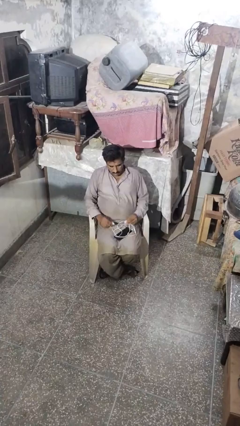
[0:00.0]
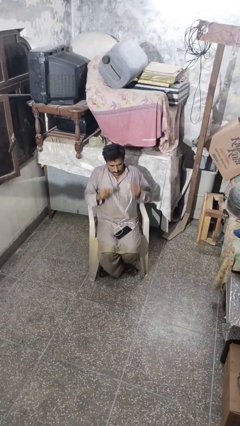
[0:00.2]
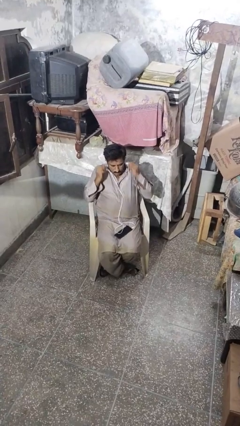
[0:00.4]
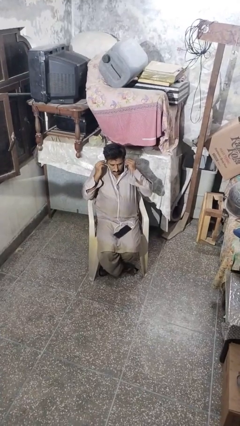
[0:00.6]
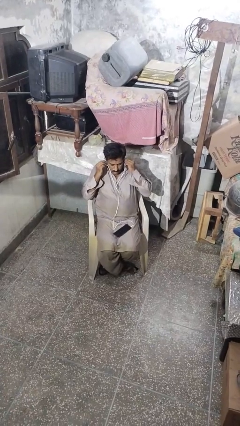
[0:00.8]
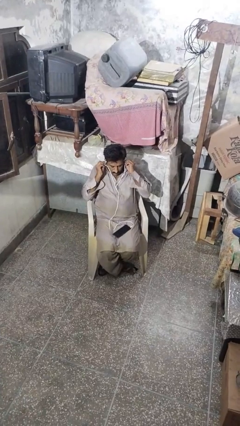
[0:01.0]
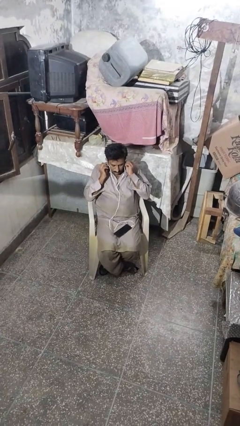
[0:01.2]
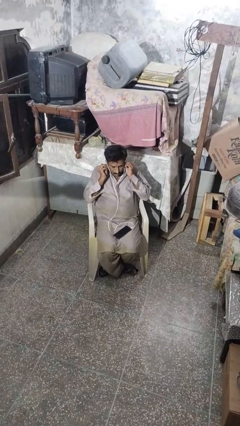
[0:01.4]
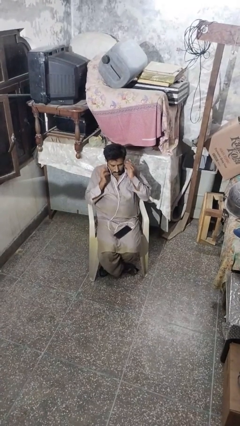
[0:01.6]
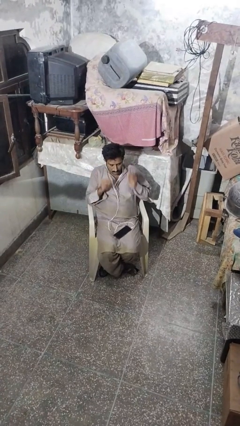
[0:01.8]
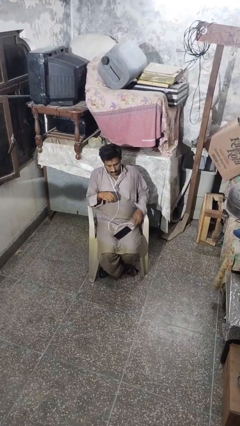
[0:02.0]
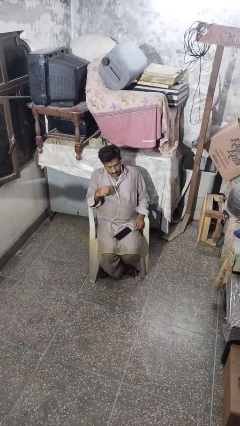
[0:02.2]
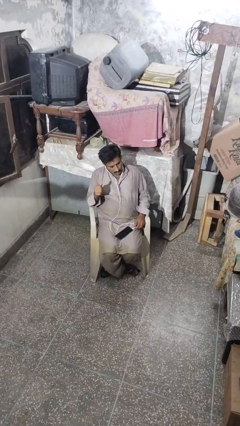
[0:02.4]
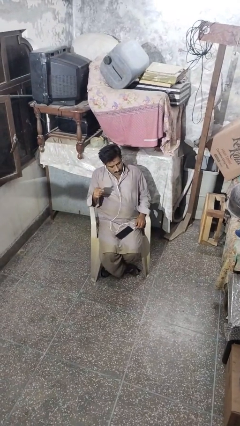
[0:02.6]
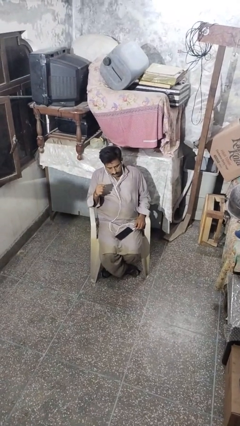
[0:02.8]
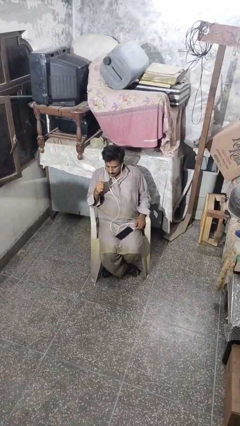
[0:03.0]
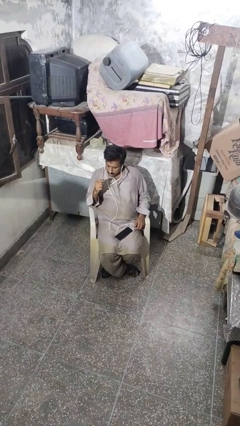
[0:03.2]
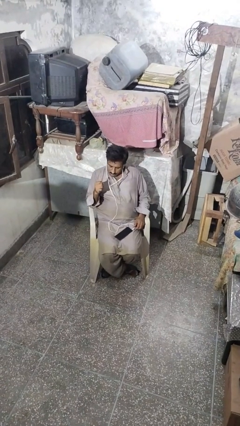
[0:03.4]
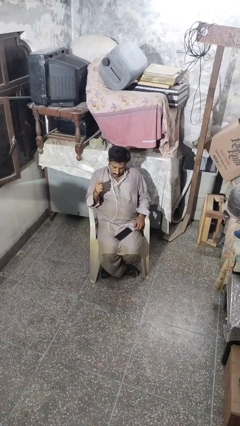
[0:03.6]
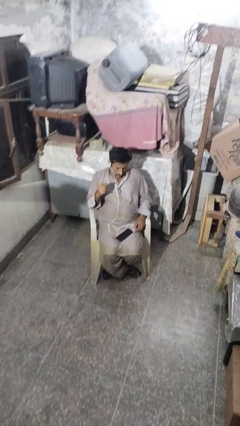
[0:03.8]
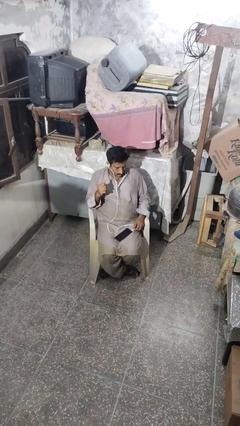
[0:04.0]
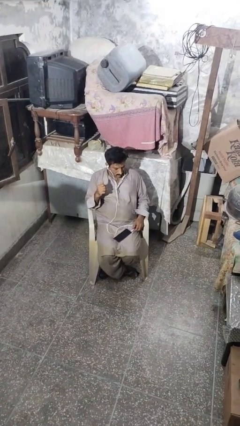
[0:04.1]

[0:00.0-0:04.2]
person puts on headphones

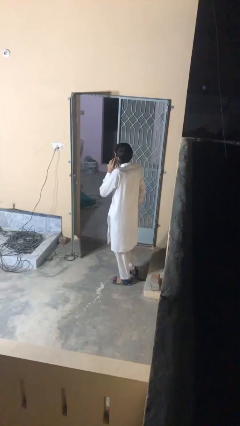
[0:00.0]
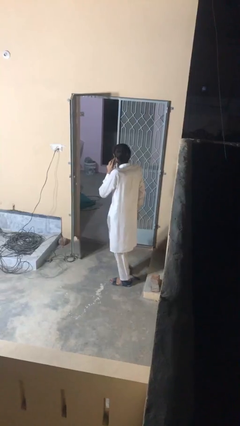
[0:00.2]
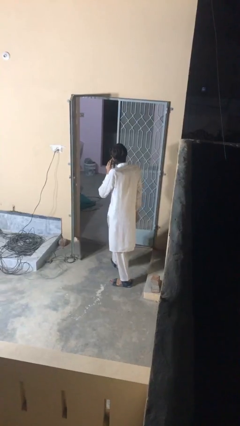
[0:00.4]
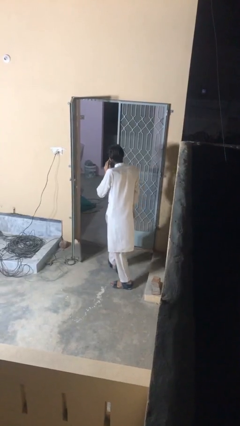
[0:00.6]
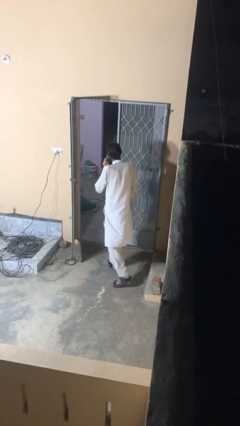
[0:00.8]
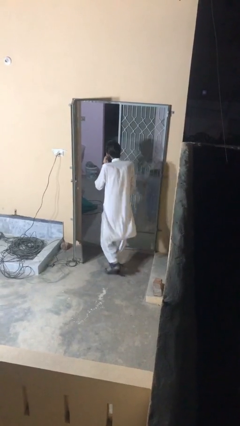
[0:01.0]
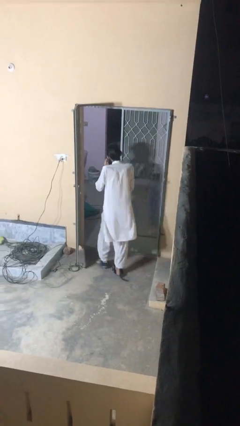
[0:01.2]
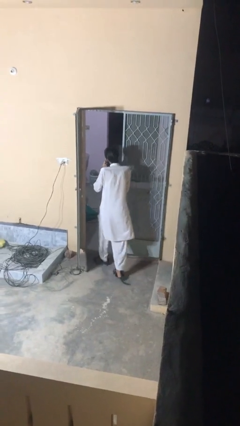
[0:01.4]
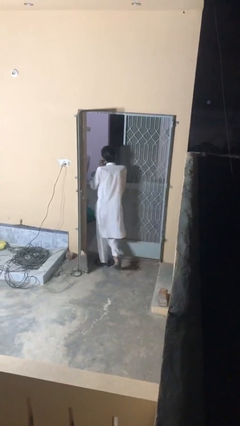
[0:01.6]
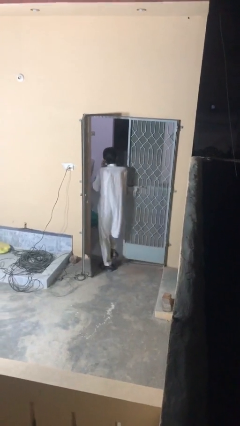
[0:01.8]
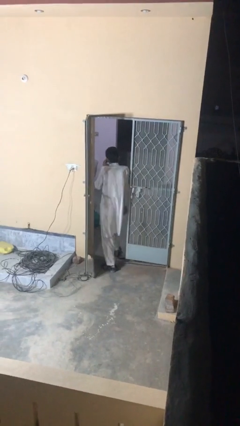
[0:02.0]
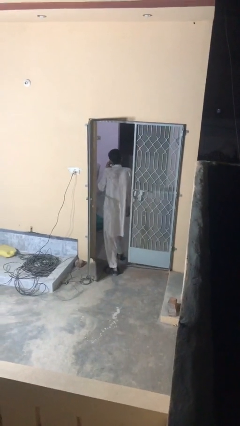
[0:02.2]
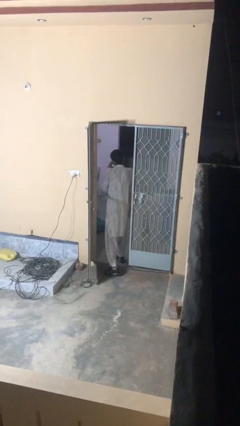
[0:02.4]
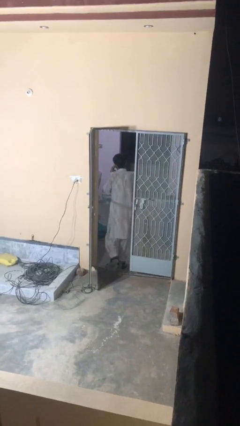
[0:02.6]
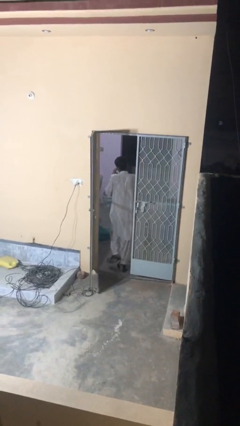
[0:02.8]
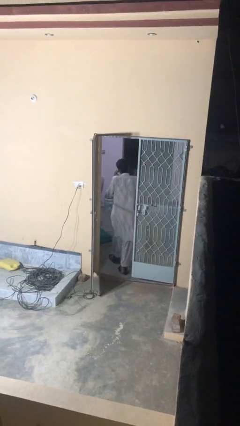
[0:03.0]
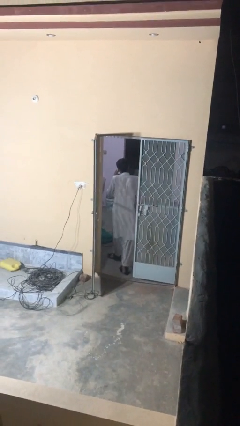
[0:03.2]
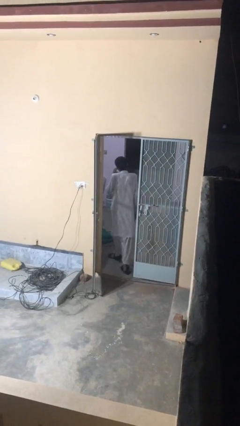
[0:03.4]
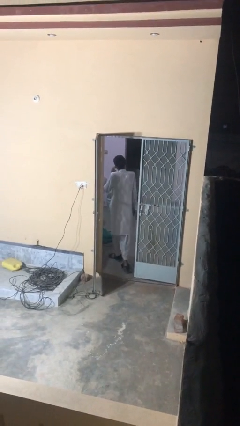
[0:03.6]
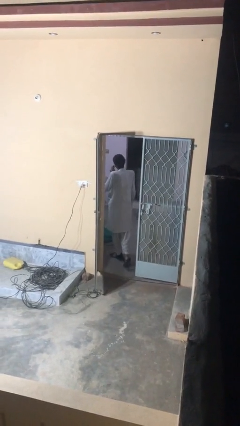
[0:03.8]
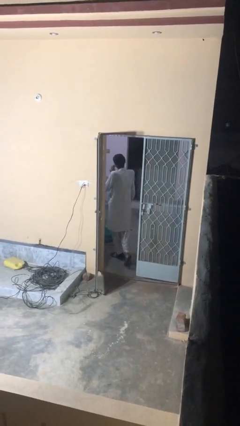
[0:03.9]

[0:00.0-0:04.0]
person exits scene through structure

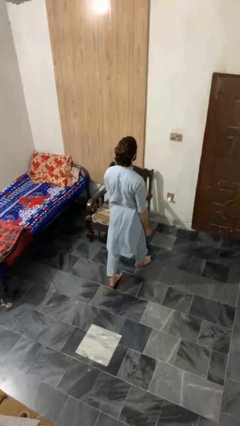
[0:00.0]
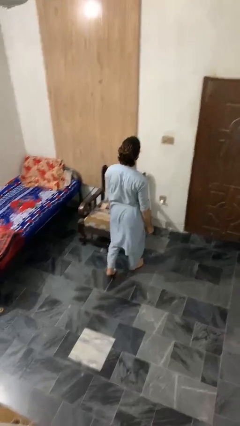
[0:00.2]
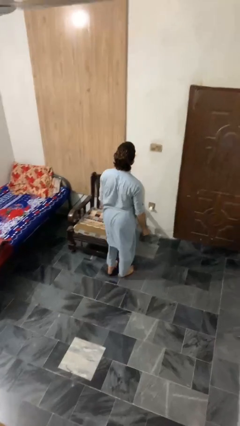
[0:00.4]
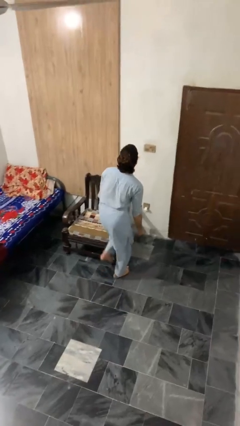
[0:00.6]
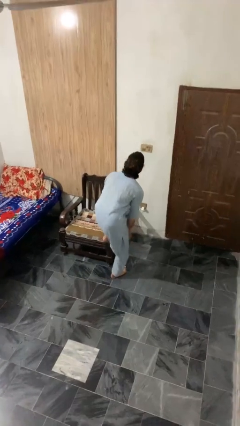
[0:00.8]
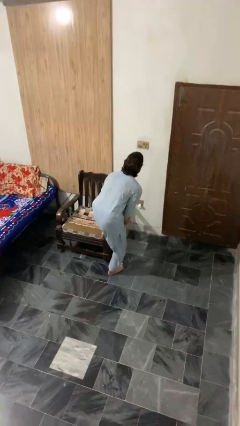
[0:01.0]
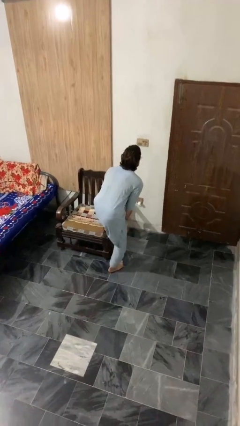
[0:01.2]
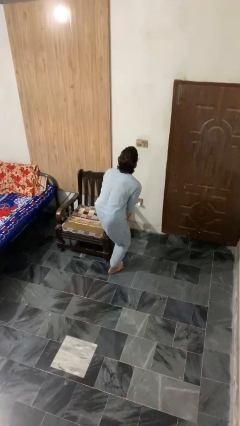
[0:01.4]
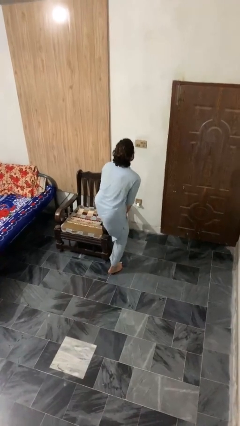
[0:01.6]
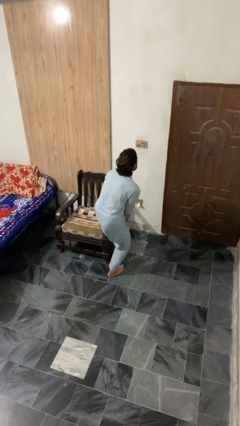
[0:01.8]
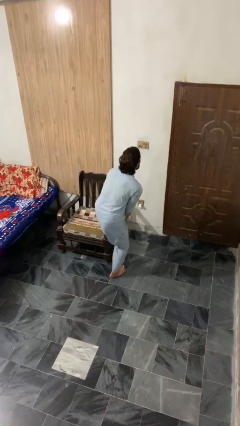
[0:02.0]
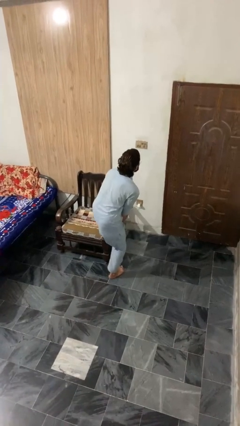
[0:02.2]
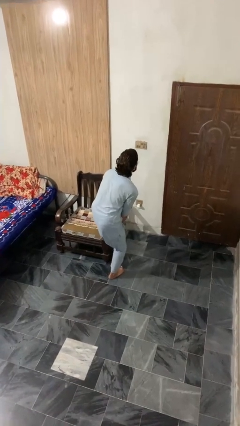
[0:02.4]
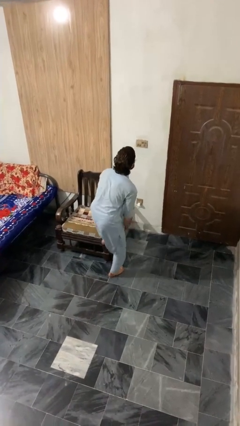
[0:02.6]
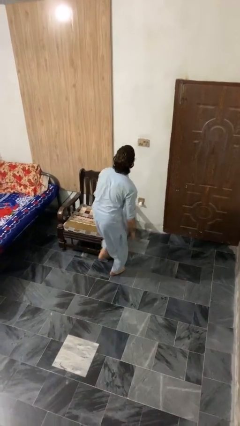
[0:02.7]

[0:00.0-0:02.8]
person stubs toe

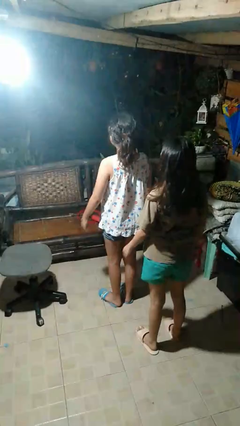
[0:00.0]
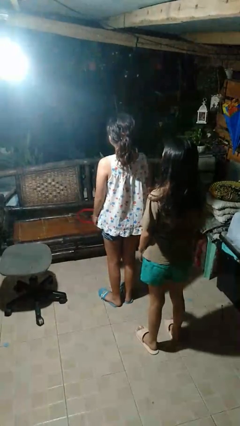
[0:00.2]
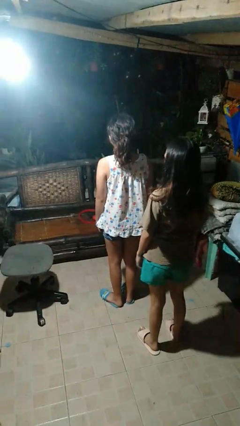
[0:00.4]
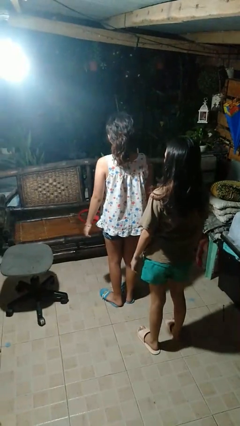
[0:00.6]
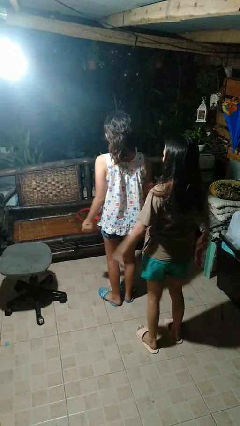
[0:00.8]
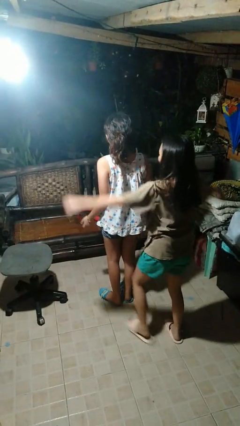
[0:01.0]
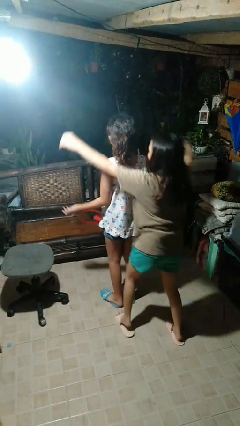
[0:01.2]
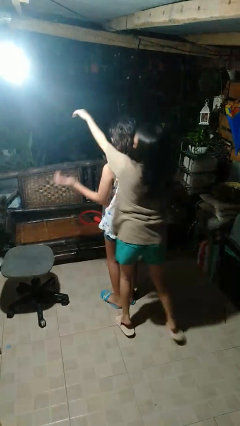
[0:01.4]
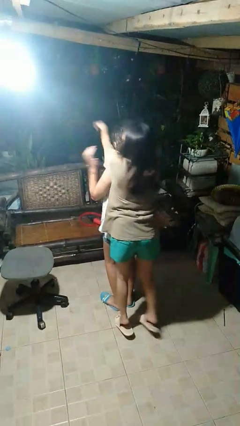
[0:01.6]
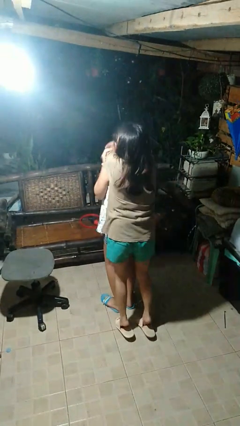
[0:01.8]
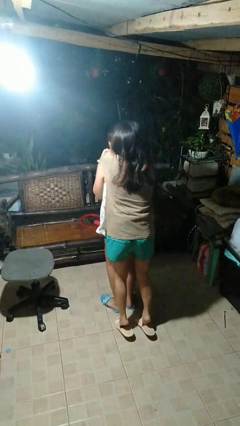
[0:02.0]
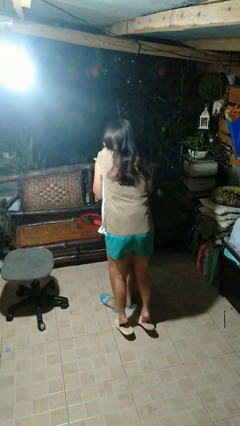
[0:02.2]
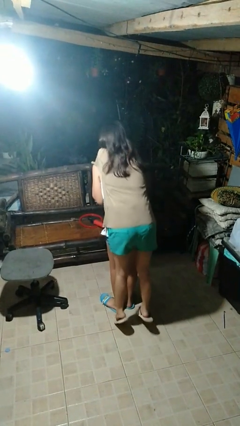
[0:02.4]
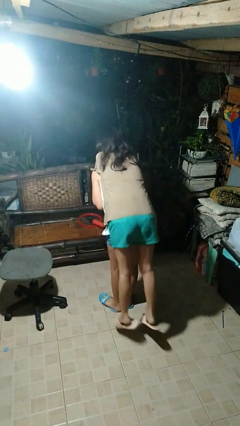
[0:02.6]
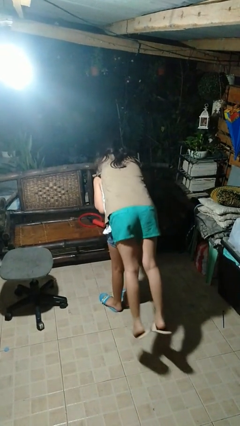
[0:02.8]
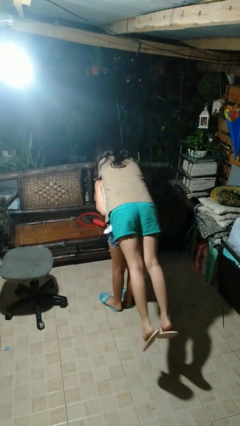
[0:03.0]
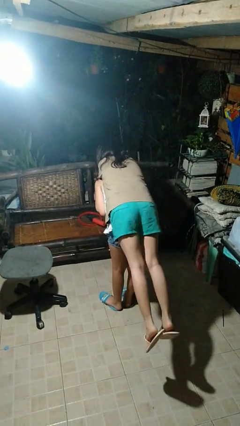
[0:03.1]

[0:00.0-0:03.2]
person carries person on back

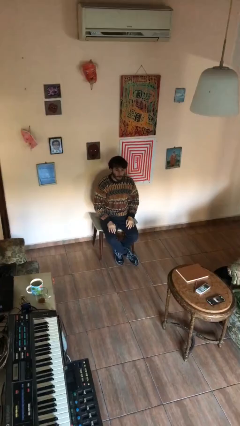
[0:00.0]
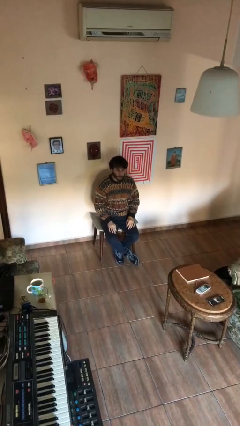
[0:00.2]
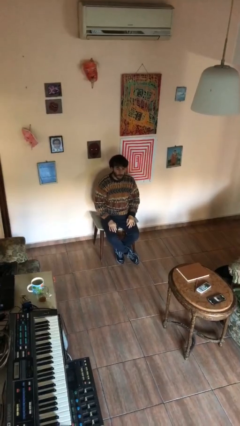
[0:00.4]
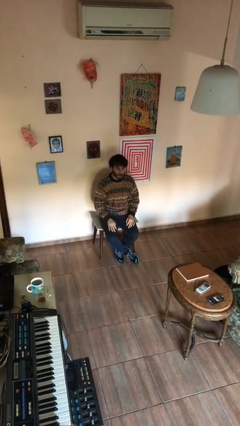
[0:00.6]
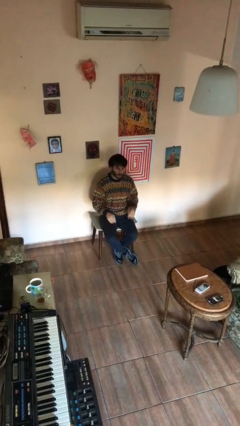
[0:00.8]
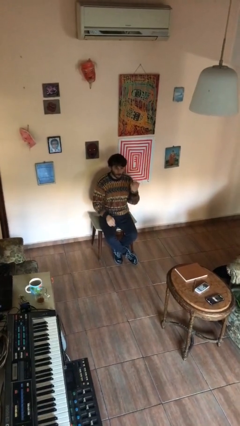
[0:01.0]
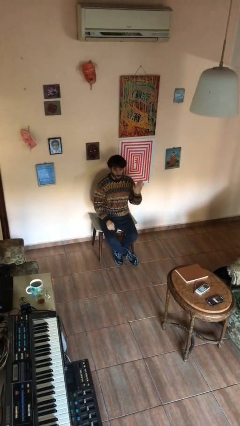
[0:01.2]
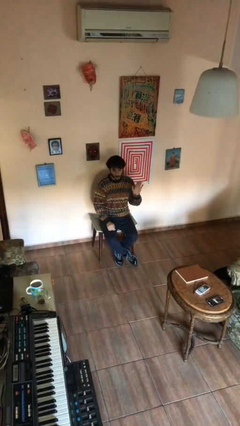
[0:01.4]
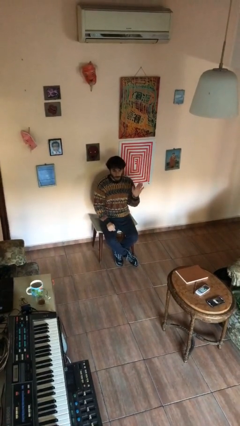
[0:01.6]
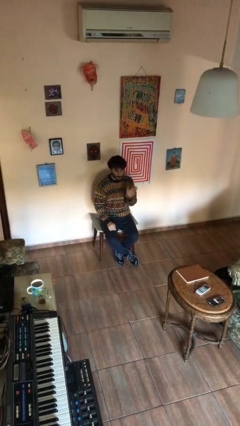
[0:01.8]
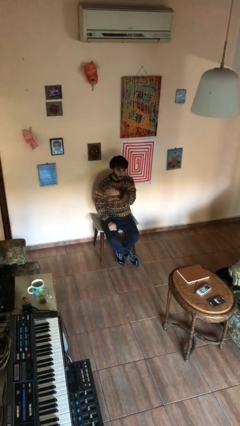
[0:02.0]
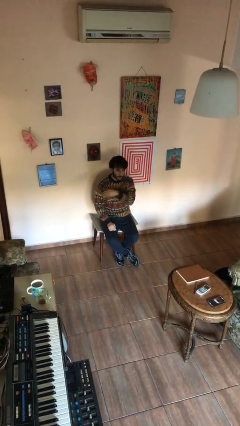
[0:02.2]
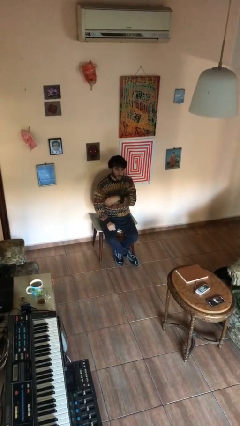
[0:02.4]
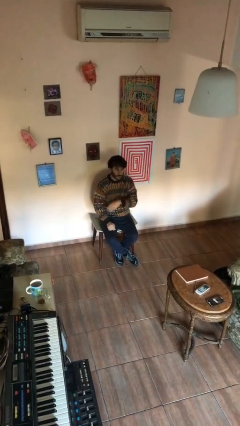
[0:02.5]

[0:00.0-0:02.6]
person gestures swipe right

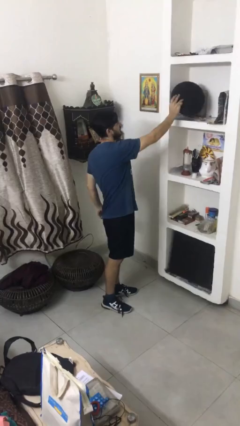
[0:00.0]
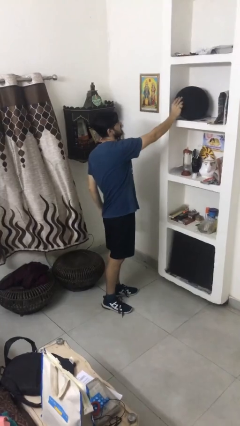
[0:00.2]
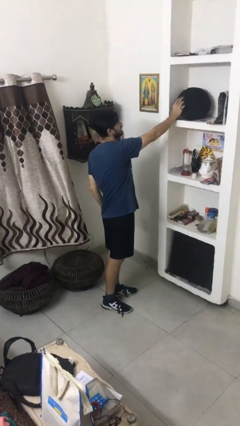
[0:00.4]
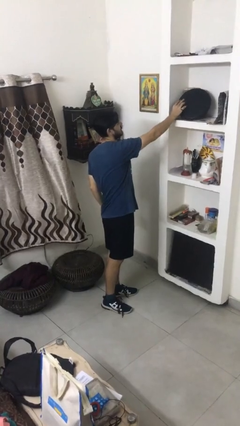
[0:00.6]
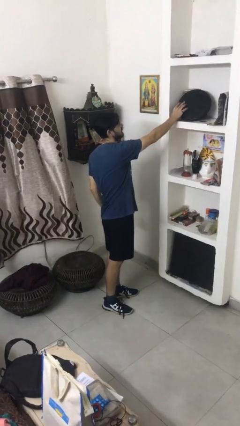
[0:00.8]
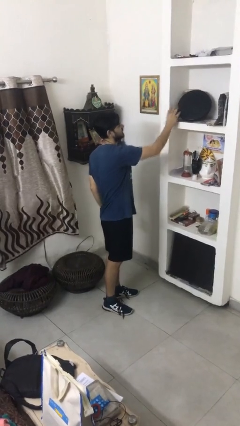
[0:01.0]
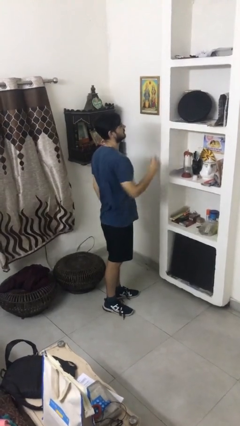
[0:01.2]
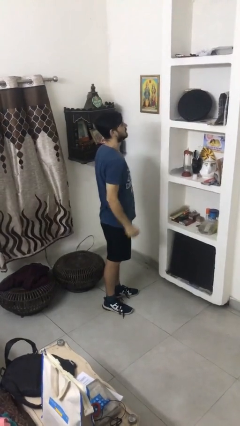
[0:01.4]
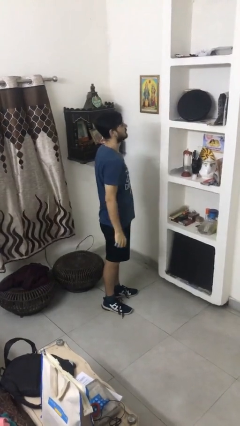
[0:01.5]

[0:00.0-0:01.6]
person puts down object on shelf
